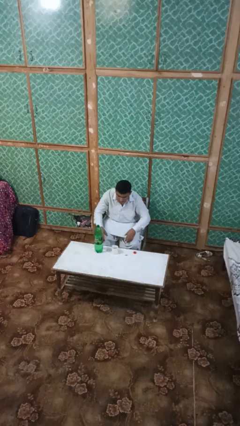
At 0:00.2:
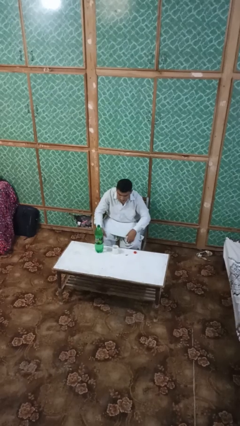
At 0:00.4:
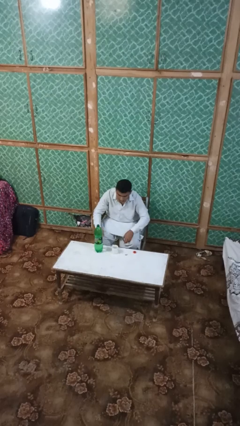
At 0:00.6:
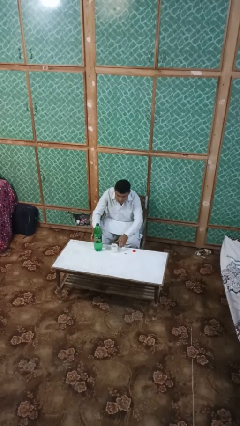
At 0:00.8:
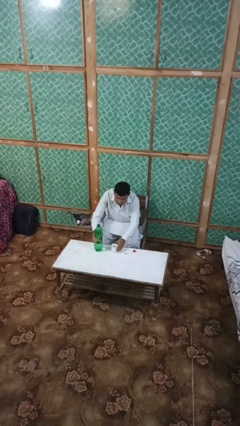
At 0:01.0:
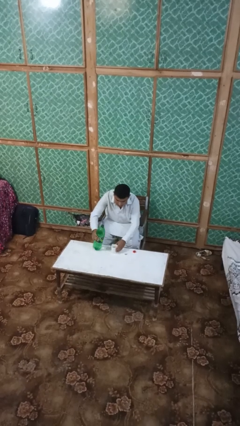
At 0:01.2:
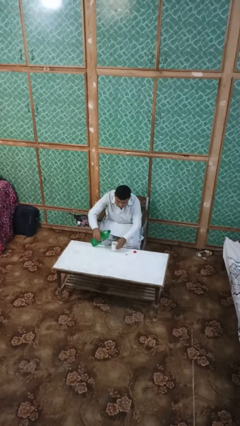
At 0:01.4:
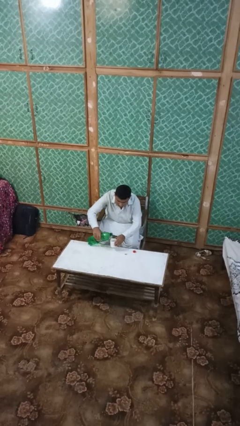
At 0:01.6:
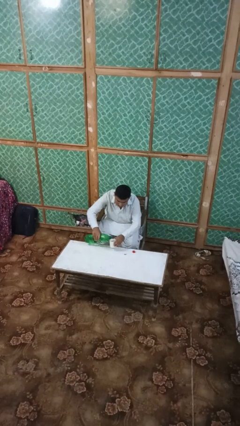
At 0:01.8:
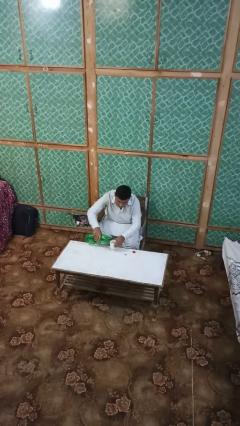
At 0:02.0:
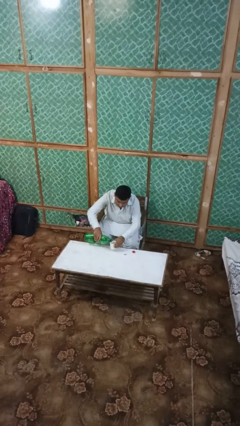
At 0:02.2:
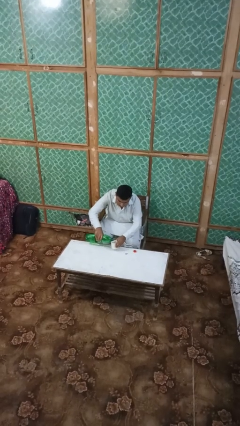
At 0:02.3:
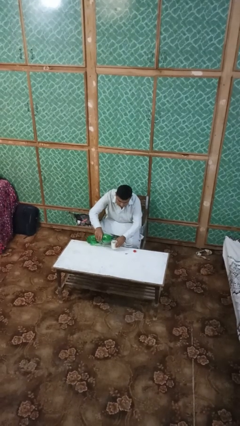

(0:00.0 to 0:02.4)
person pours liquid into cup

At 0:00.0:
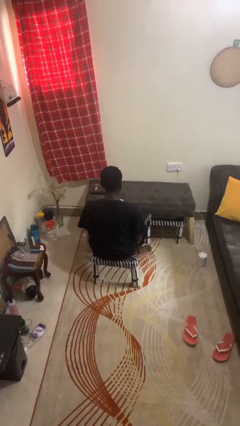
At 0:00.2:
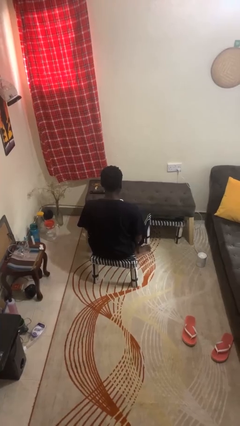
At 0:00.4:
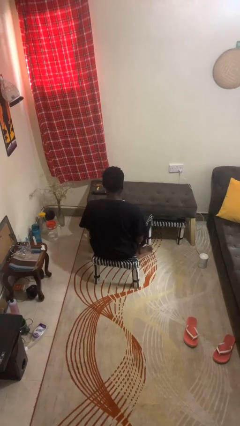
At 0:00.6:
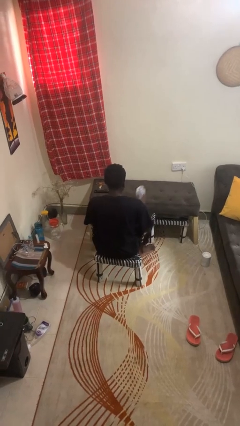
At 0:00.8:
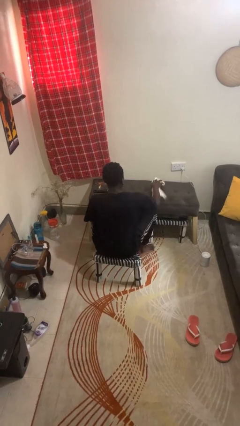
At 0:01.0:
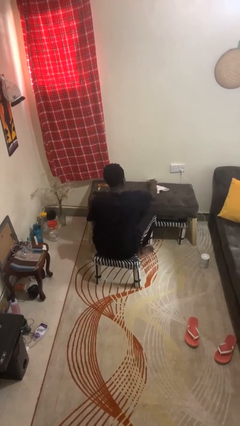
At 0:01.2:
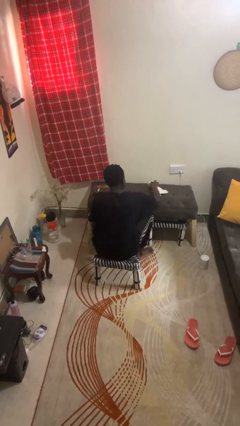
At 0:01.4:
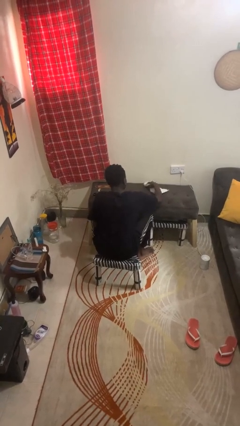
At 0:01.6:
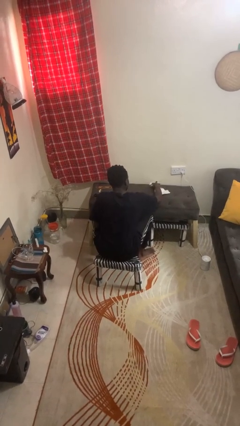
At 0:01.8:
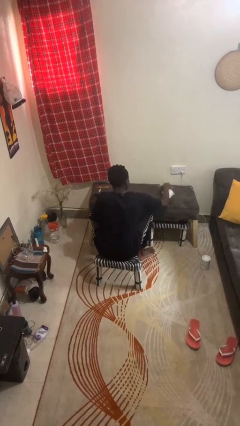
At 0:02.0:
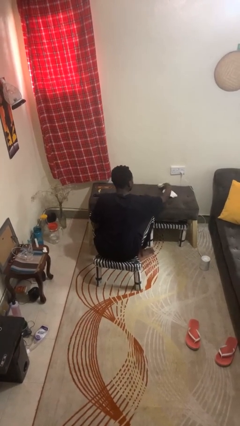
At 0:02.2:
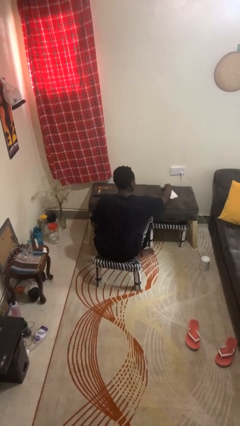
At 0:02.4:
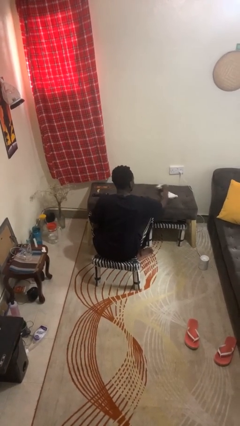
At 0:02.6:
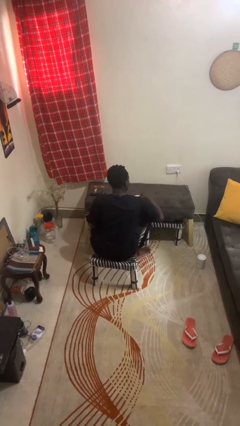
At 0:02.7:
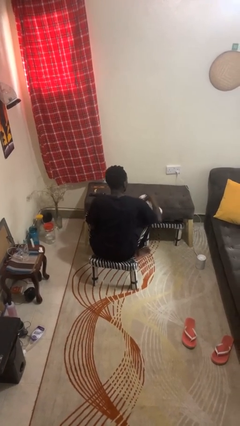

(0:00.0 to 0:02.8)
person cleans table with rag

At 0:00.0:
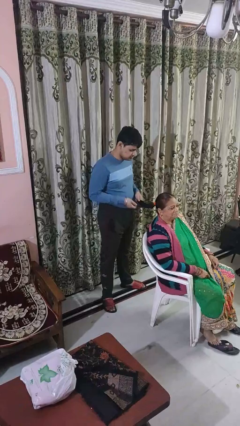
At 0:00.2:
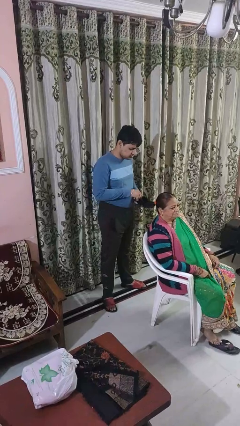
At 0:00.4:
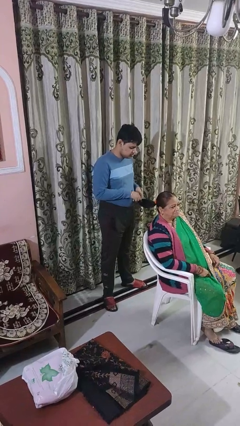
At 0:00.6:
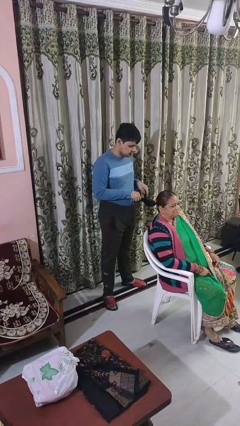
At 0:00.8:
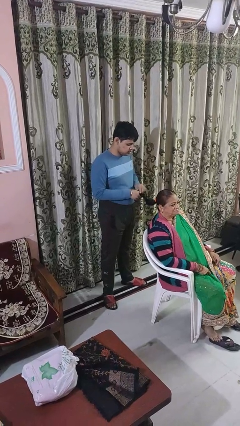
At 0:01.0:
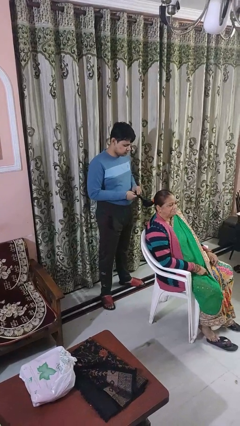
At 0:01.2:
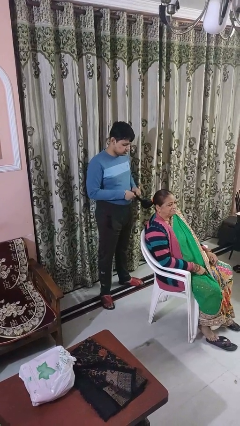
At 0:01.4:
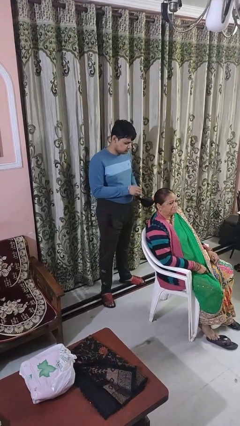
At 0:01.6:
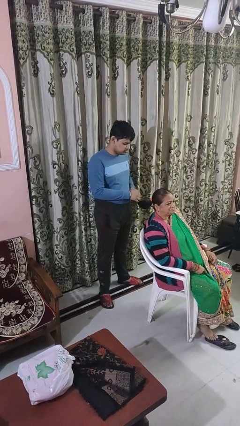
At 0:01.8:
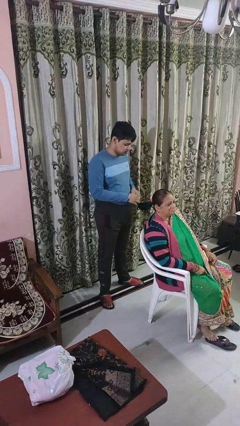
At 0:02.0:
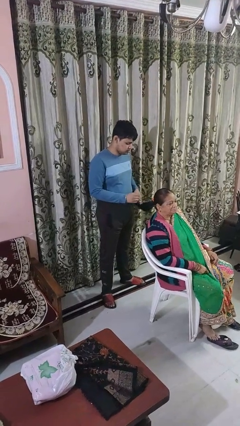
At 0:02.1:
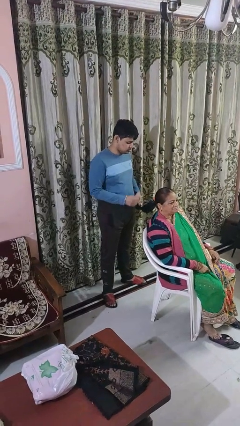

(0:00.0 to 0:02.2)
person braids hair of person

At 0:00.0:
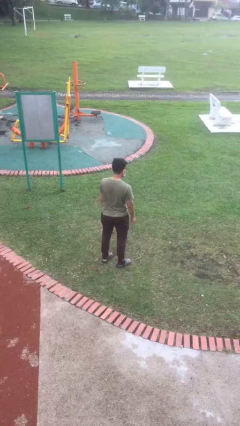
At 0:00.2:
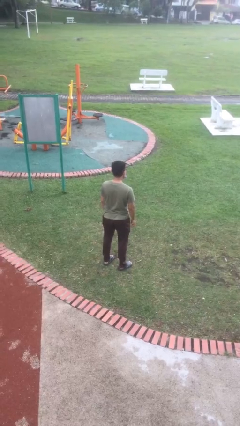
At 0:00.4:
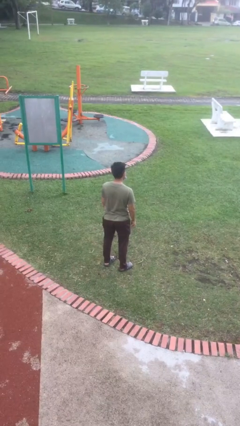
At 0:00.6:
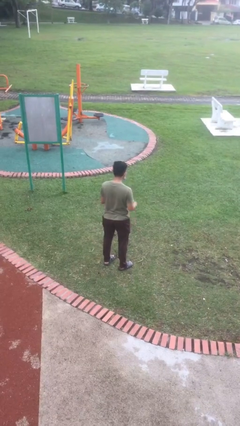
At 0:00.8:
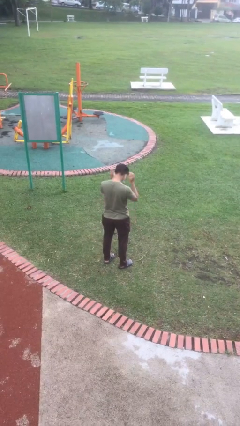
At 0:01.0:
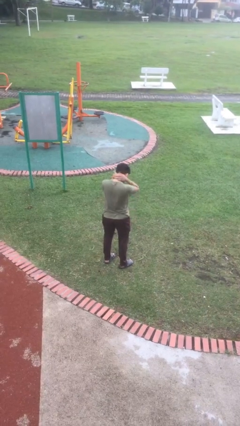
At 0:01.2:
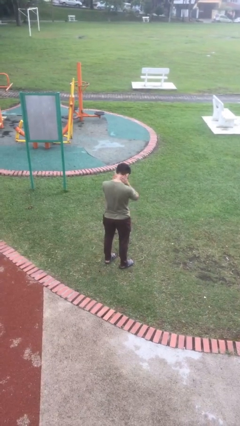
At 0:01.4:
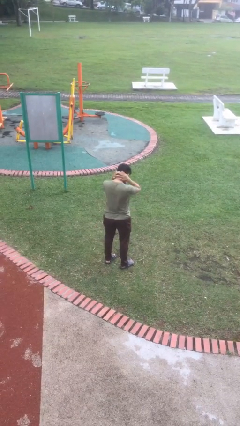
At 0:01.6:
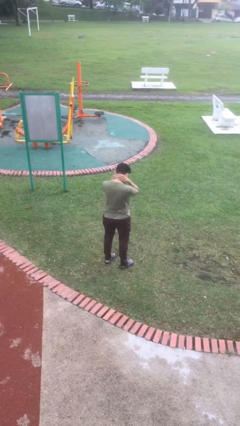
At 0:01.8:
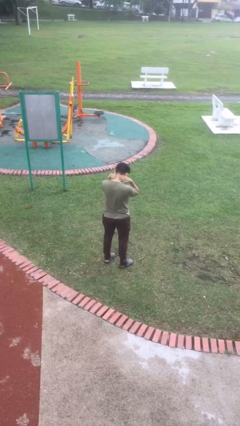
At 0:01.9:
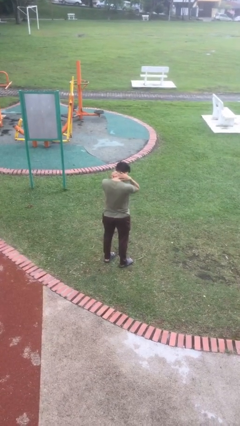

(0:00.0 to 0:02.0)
person rubs neck

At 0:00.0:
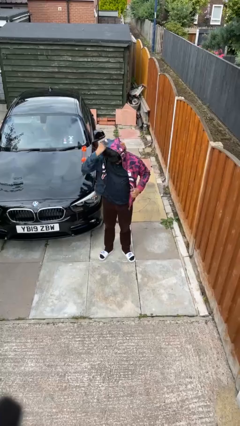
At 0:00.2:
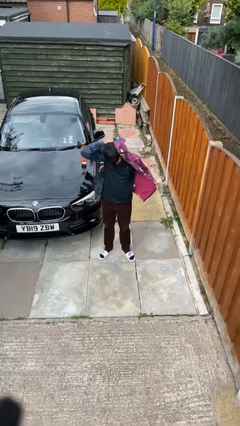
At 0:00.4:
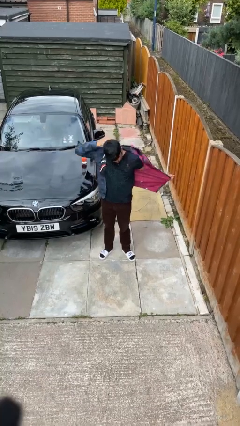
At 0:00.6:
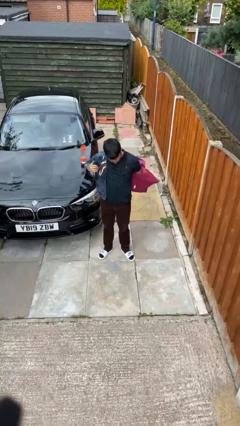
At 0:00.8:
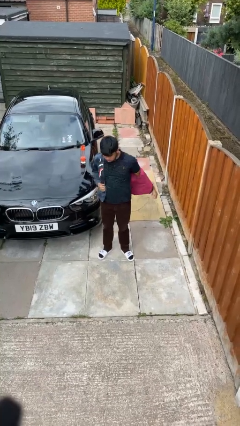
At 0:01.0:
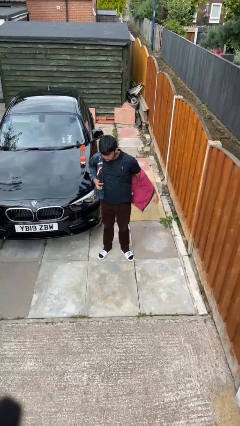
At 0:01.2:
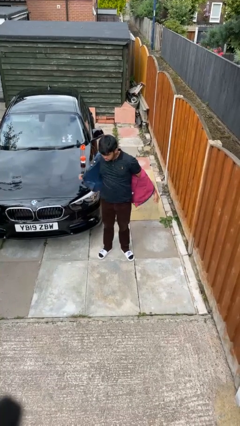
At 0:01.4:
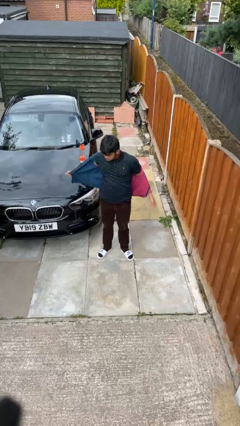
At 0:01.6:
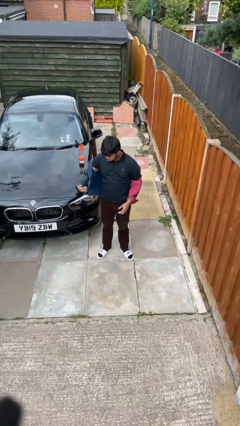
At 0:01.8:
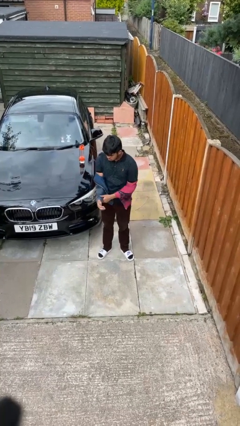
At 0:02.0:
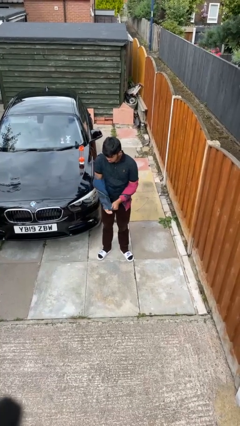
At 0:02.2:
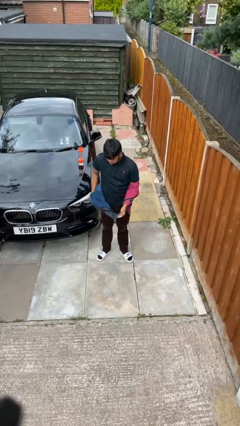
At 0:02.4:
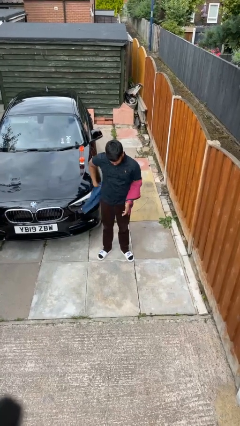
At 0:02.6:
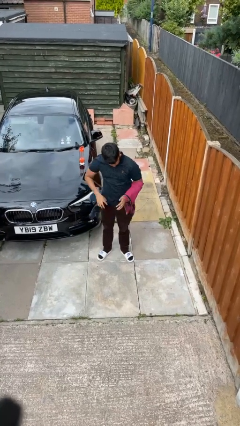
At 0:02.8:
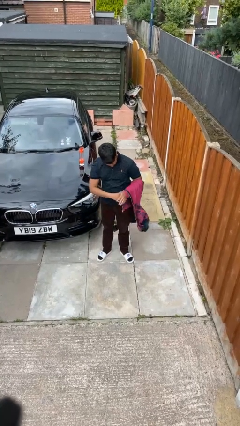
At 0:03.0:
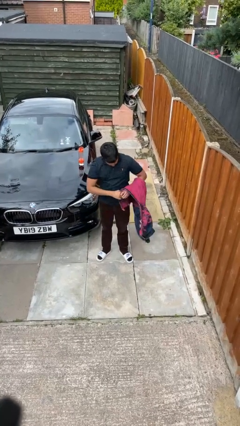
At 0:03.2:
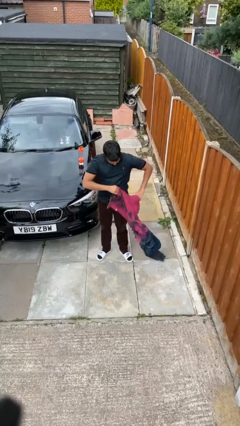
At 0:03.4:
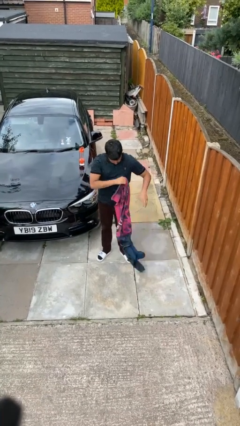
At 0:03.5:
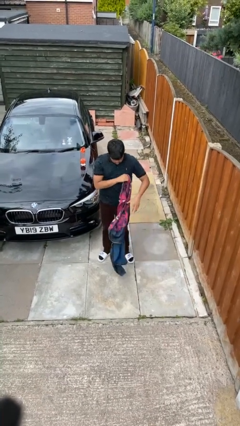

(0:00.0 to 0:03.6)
person takes off jacket

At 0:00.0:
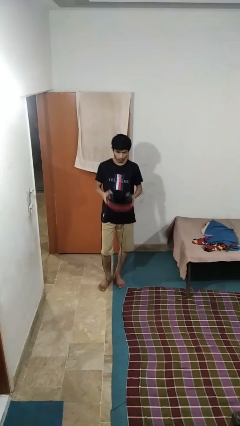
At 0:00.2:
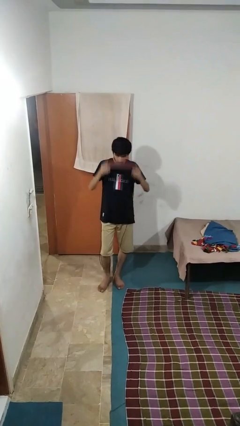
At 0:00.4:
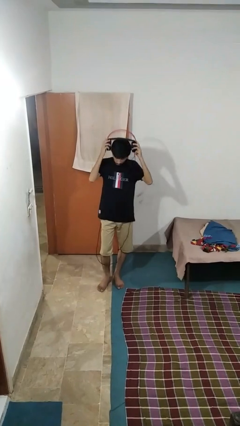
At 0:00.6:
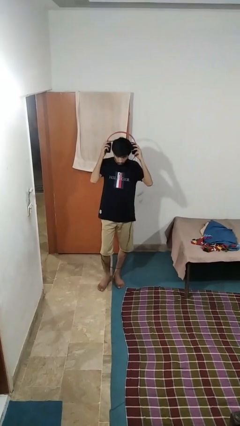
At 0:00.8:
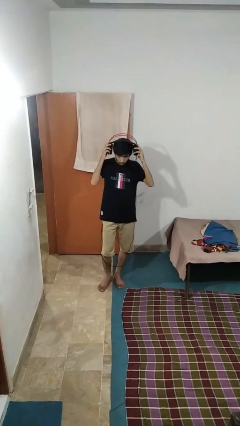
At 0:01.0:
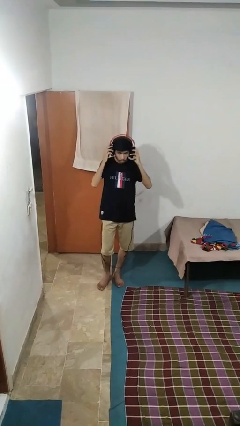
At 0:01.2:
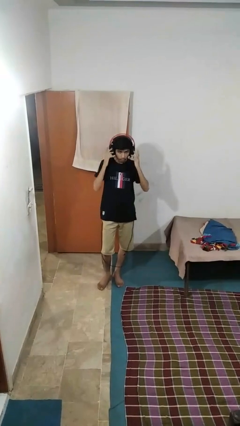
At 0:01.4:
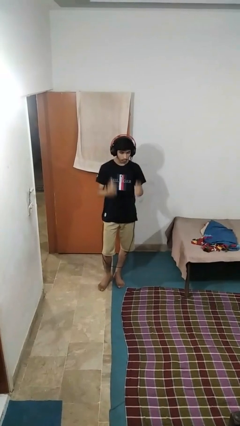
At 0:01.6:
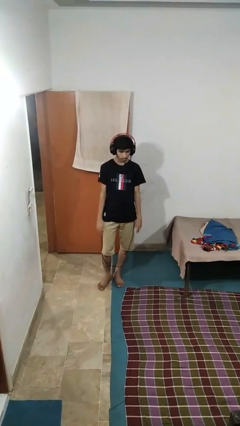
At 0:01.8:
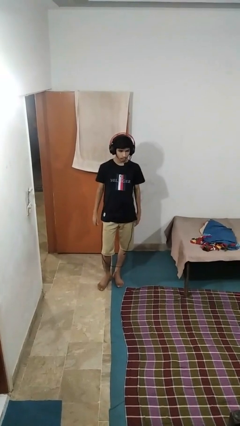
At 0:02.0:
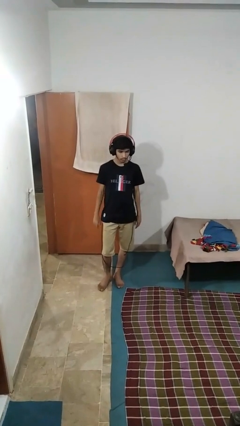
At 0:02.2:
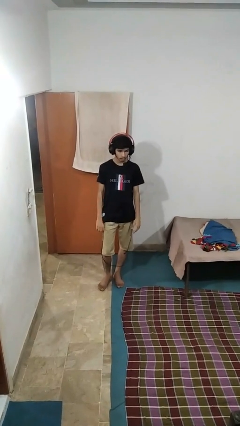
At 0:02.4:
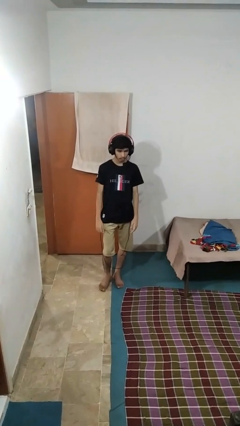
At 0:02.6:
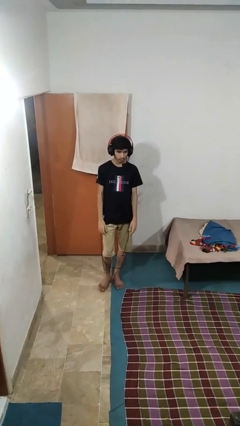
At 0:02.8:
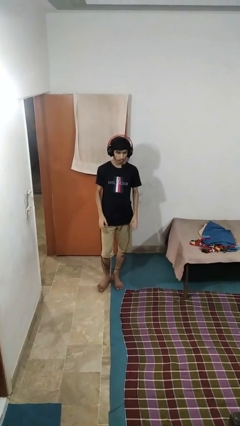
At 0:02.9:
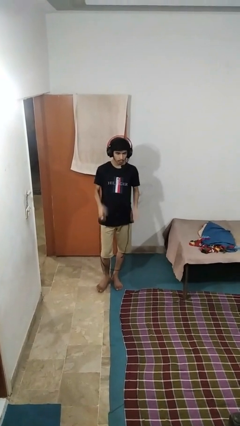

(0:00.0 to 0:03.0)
person puts on headphones

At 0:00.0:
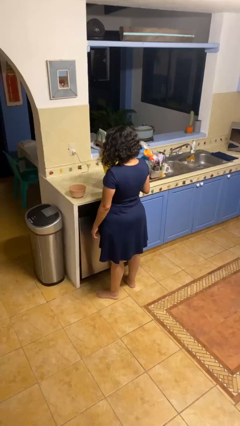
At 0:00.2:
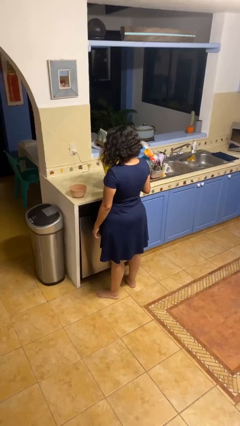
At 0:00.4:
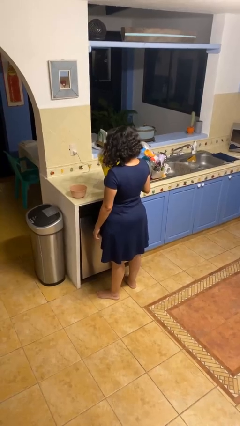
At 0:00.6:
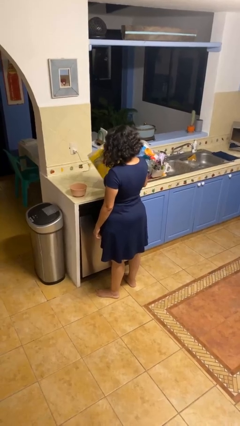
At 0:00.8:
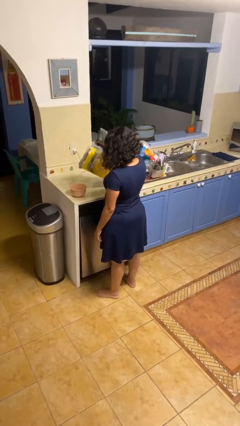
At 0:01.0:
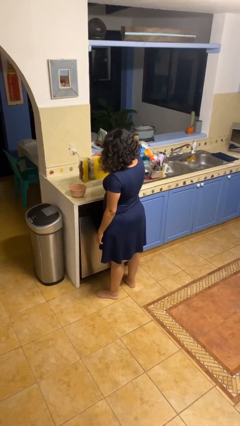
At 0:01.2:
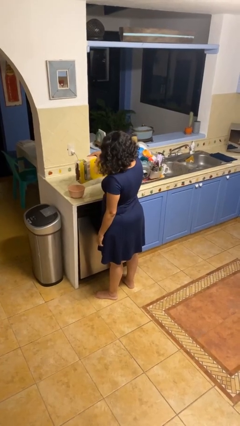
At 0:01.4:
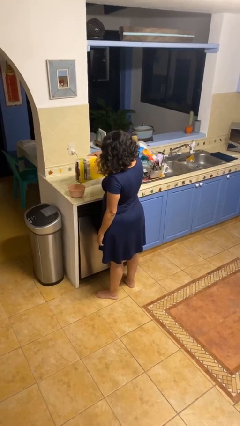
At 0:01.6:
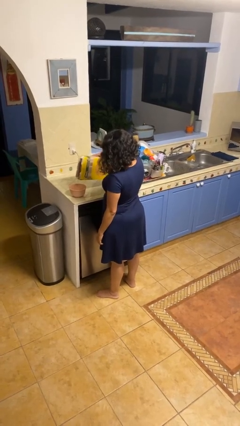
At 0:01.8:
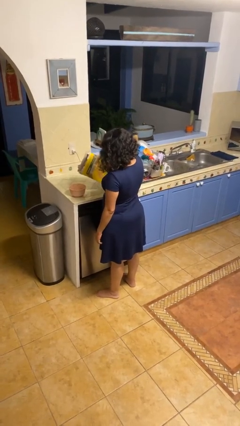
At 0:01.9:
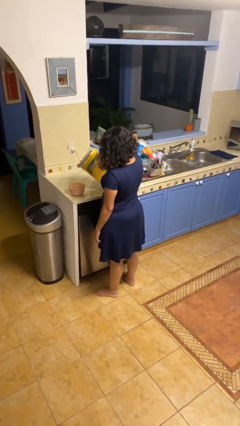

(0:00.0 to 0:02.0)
person pours into bowl
